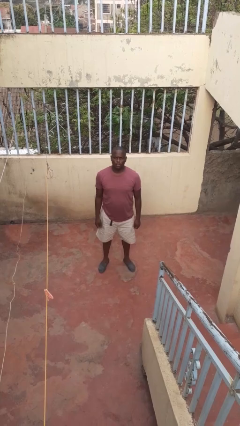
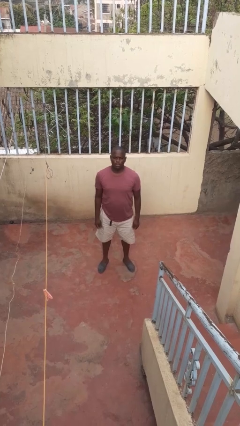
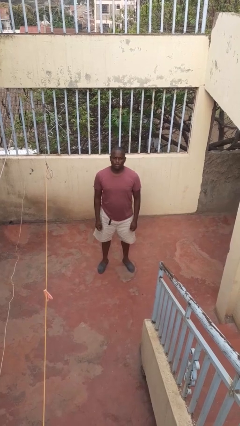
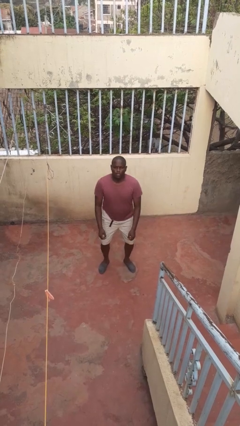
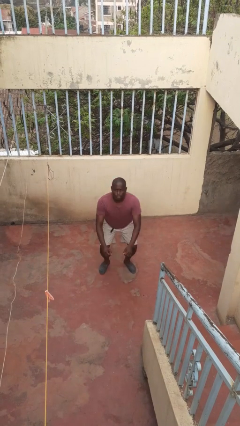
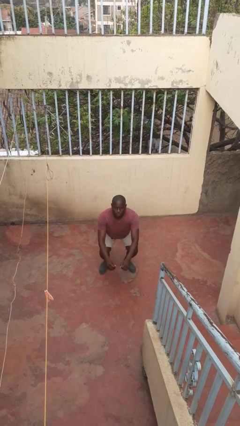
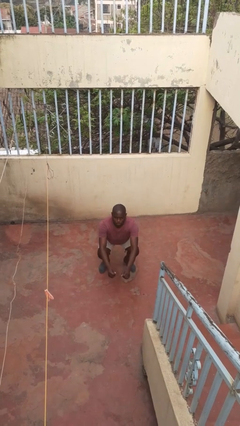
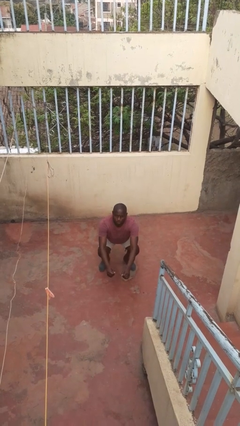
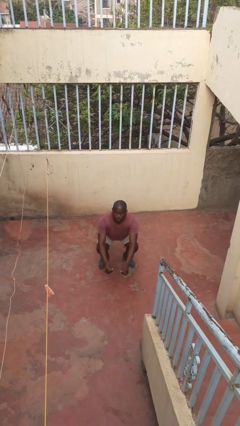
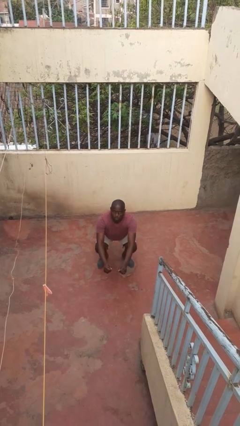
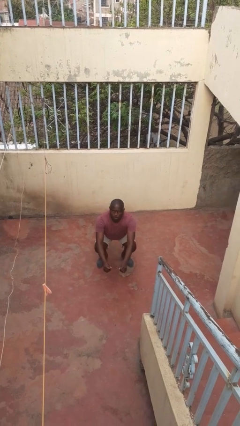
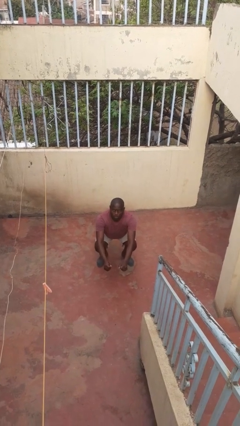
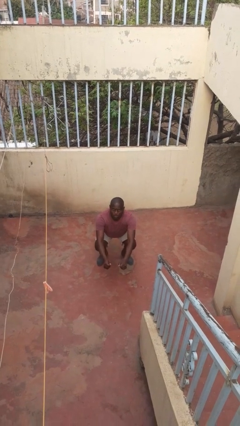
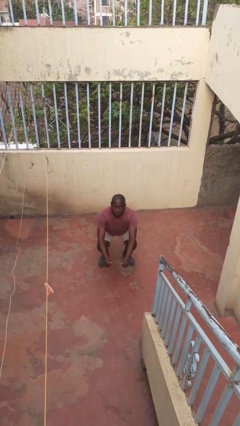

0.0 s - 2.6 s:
person squats

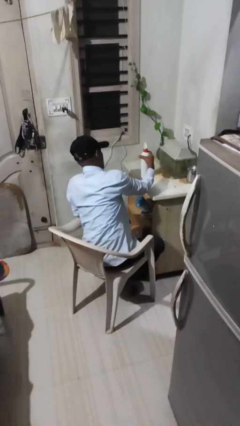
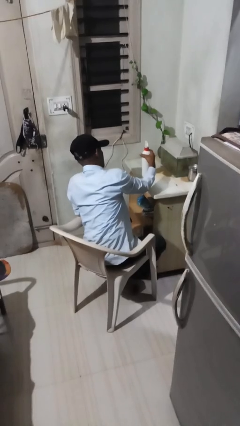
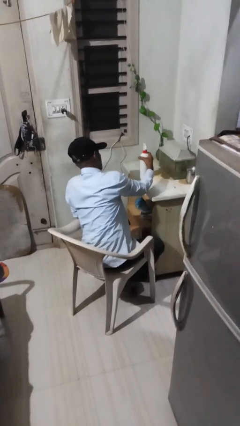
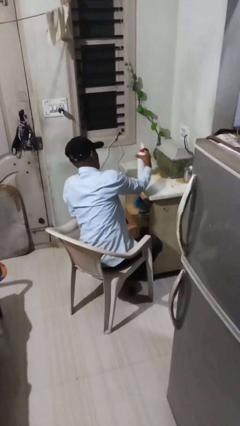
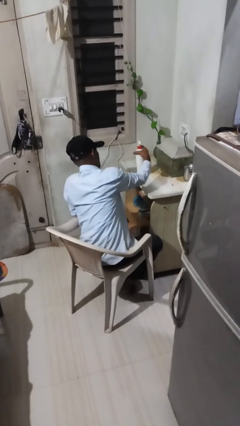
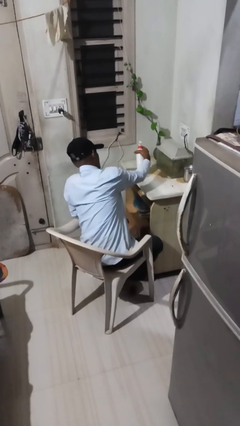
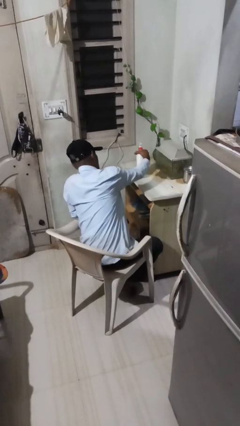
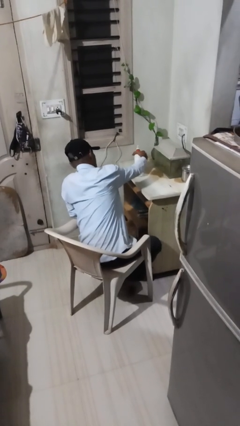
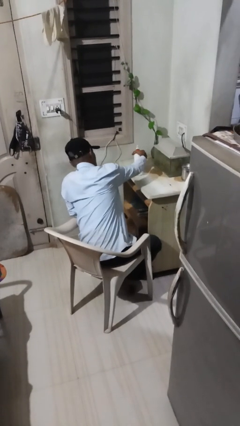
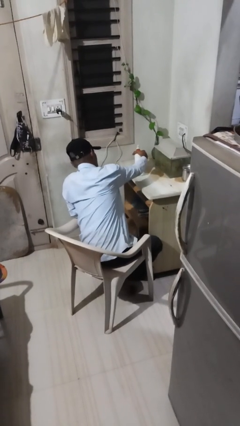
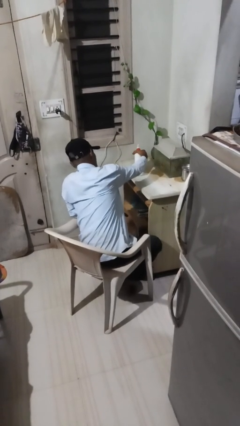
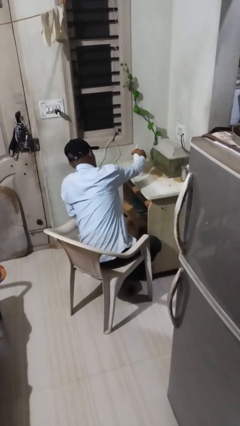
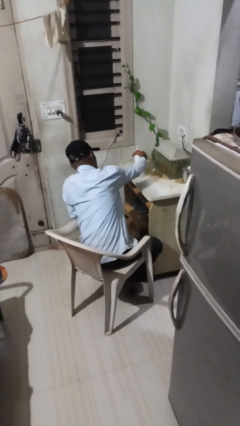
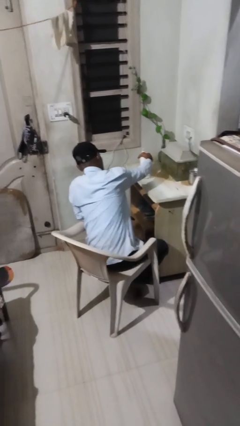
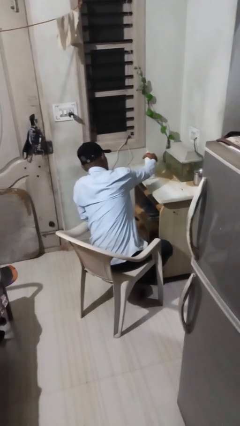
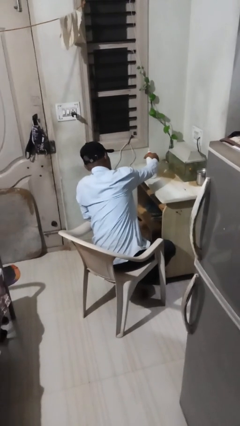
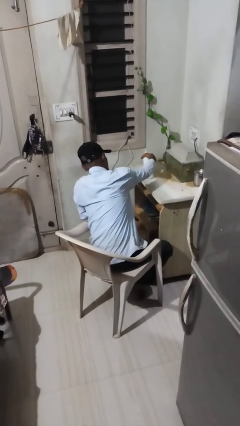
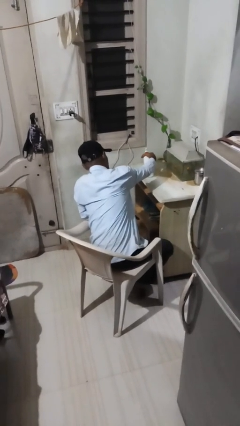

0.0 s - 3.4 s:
person sprays from bottle

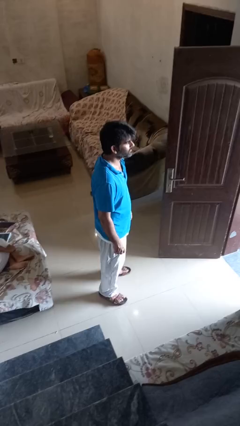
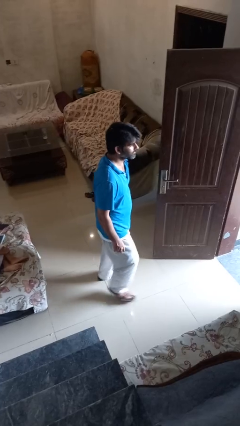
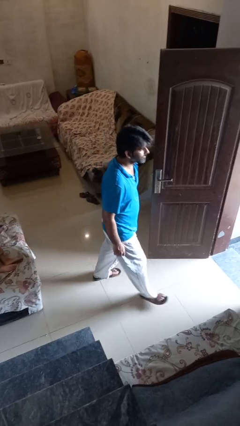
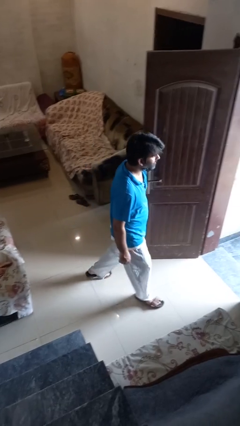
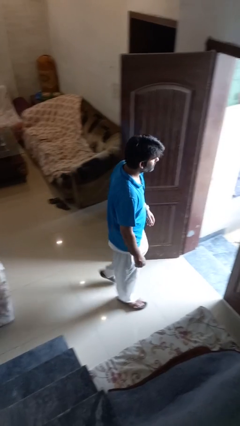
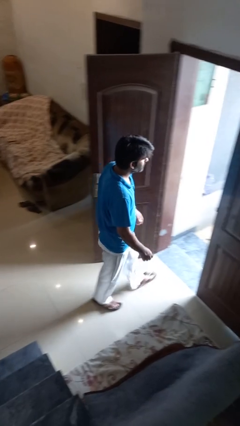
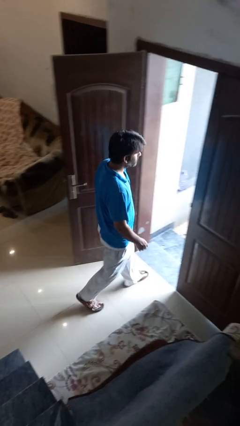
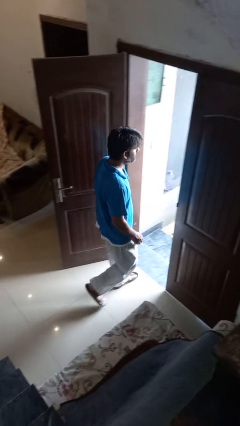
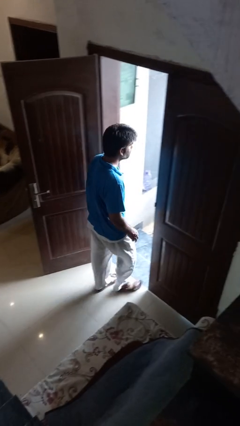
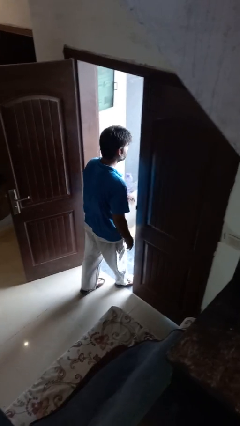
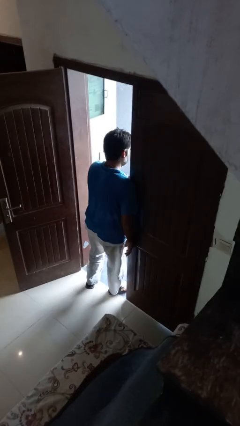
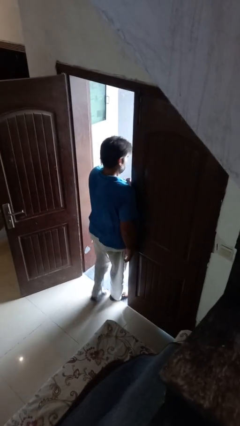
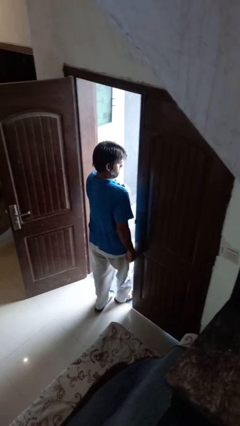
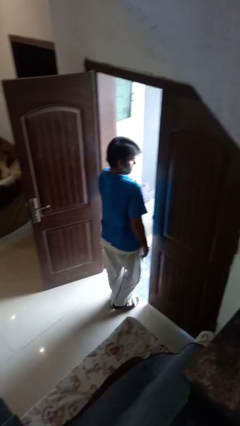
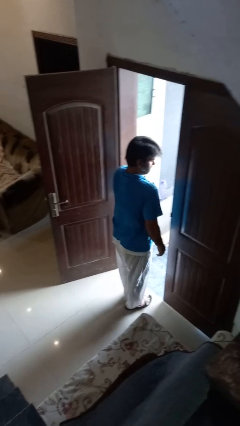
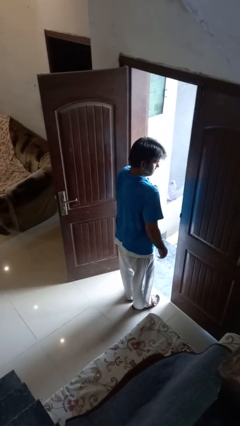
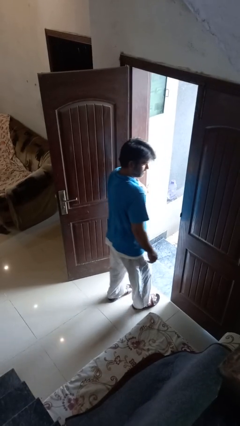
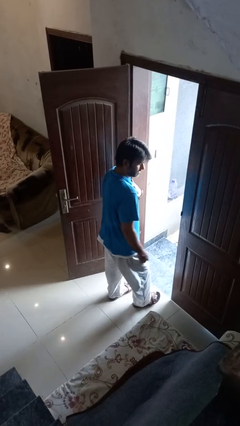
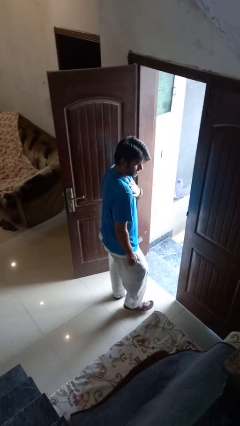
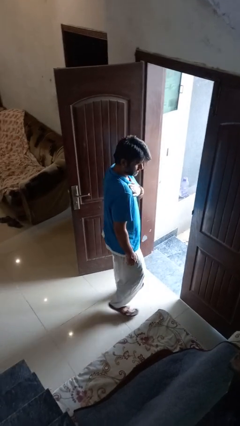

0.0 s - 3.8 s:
person bumps into wall

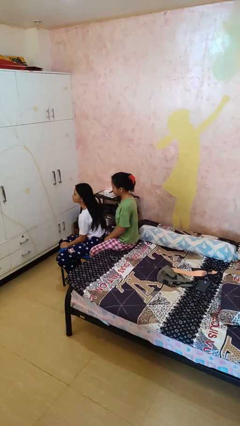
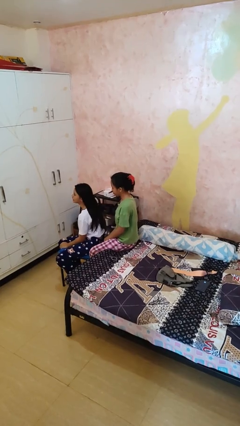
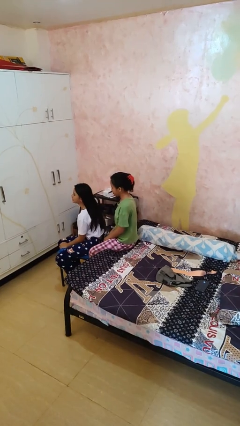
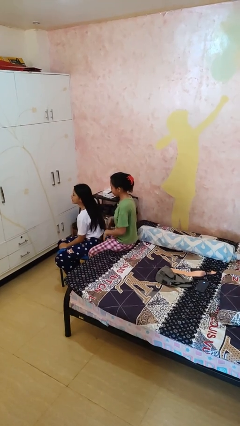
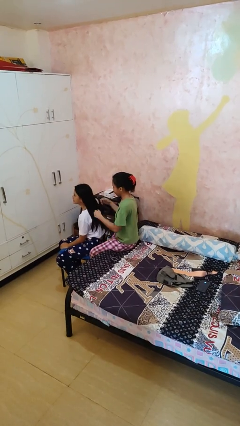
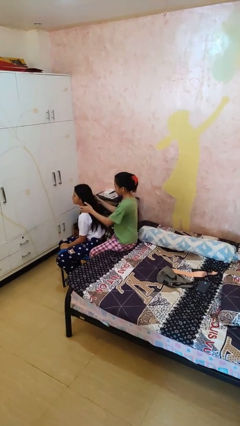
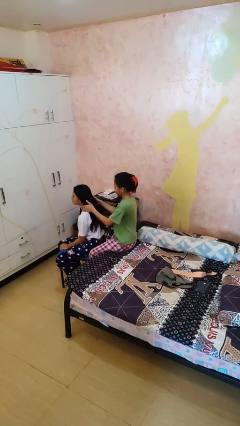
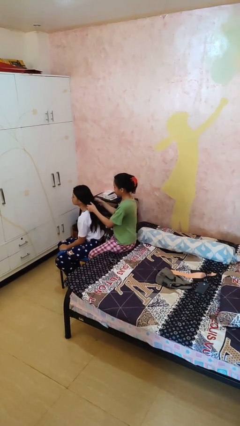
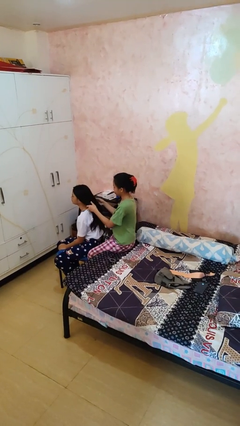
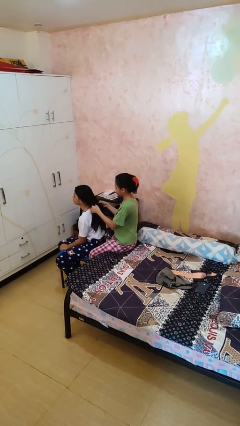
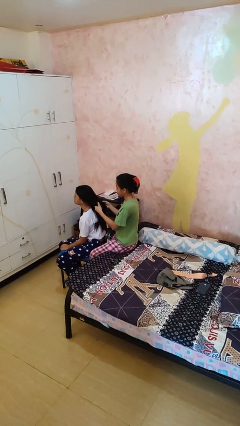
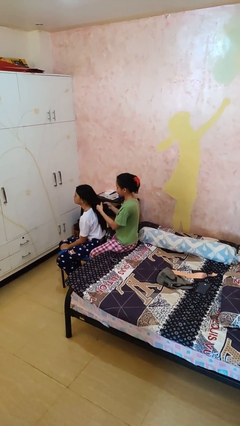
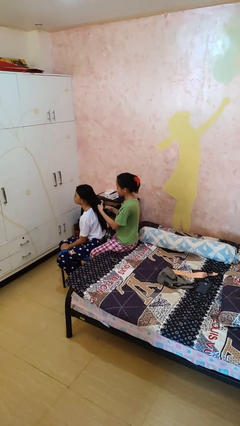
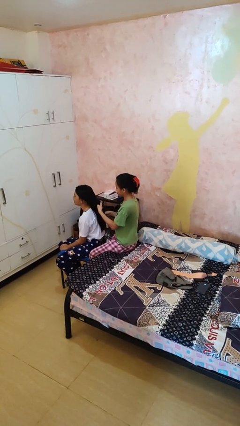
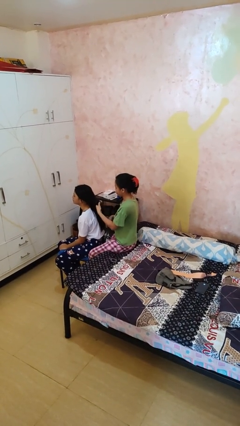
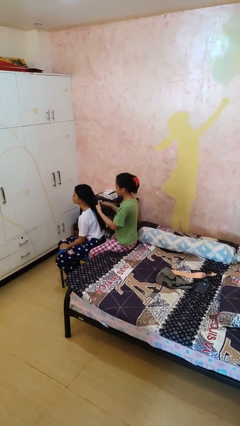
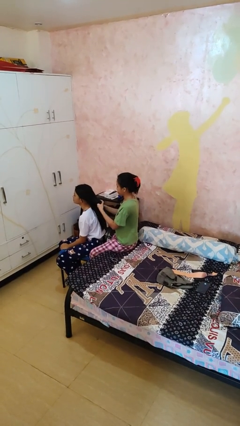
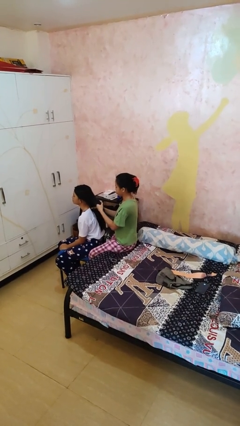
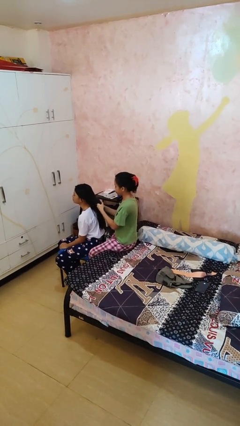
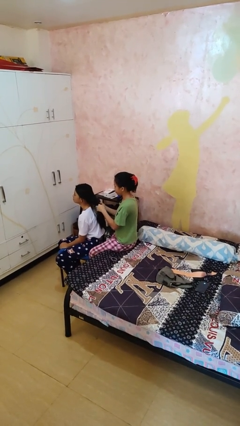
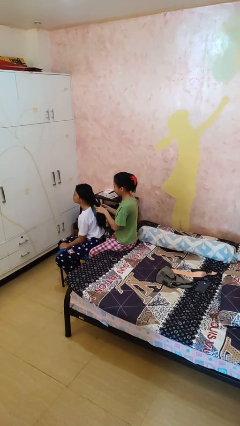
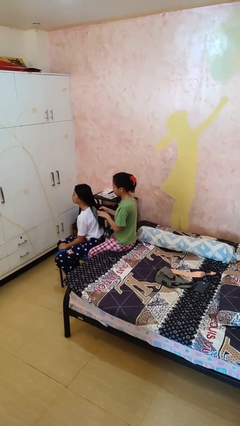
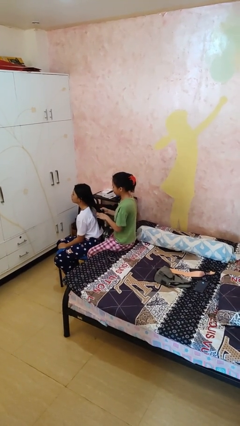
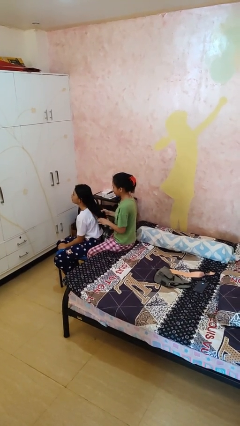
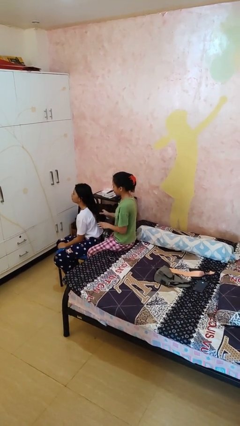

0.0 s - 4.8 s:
person braids hair of person

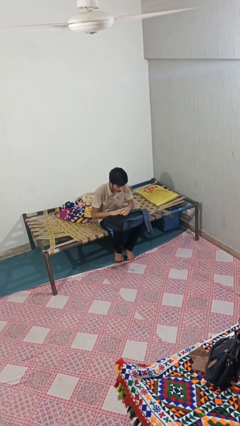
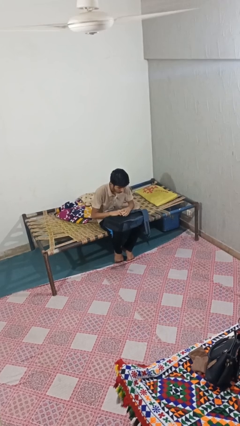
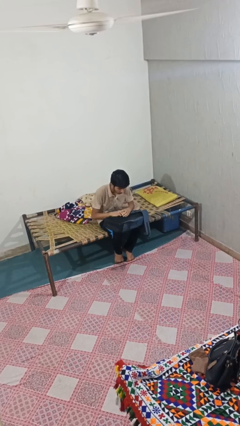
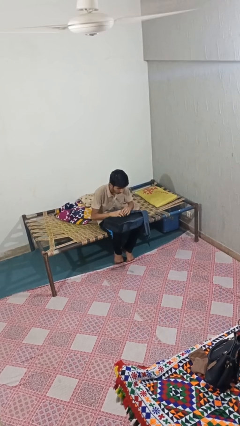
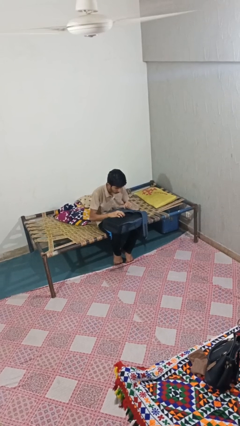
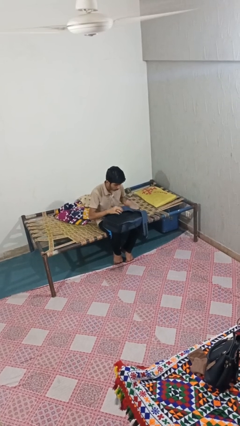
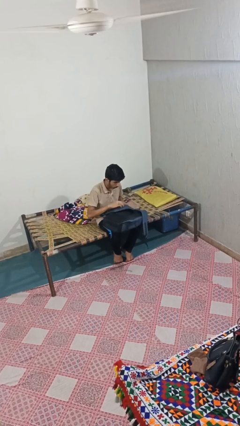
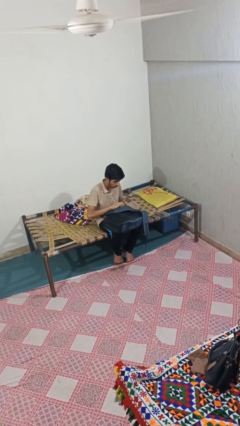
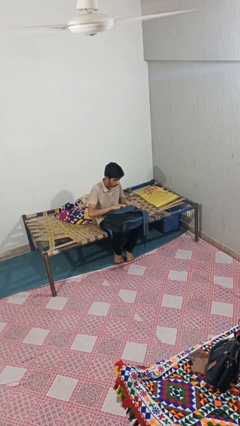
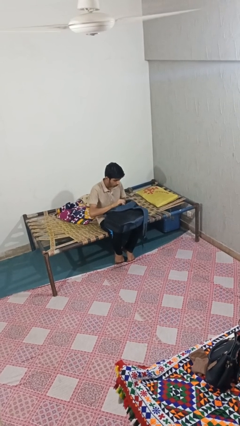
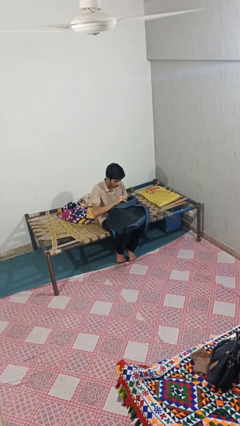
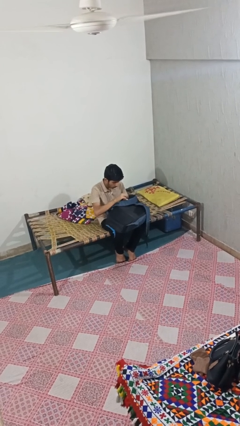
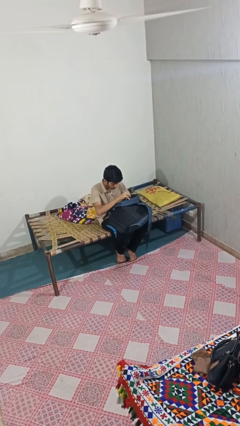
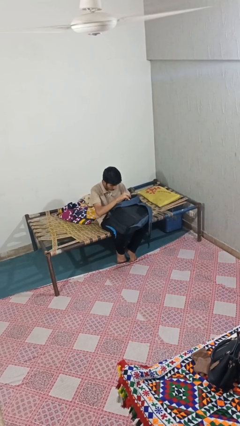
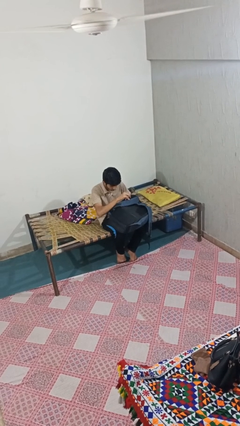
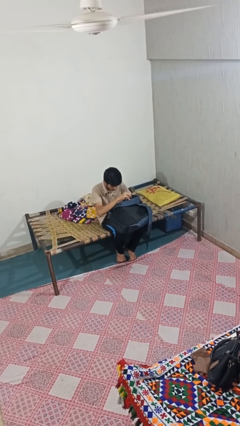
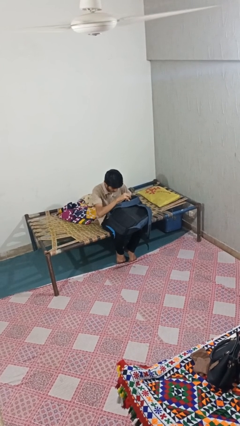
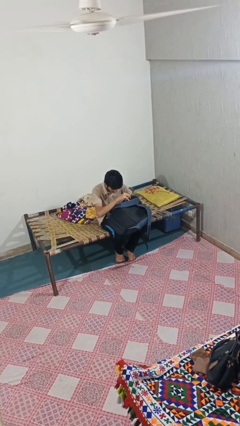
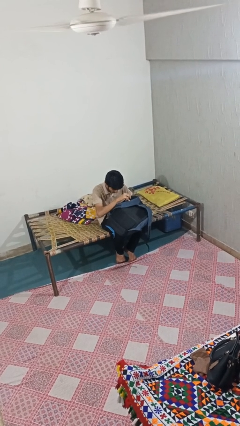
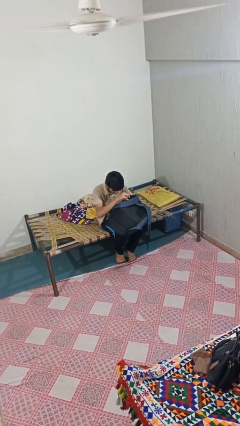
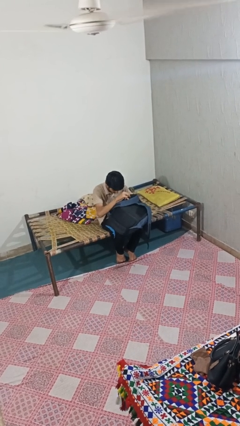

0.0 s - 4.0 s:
person searches in backpack
